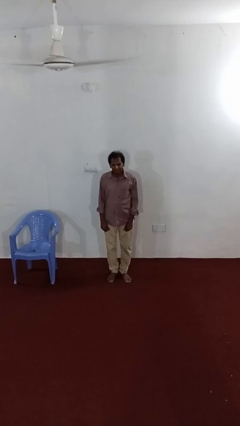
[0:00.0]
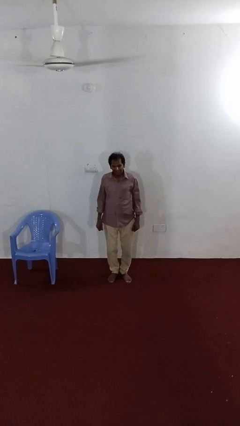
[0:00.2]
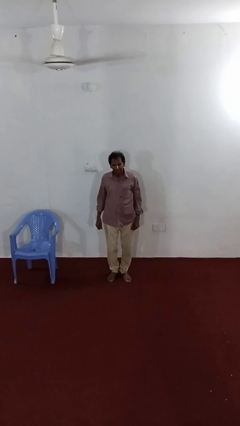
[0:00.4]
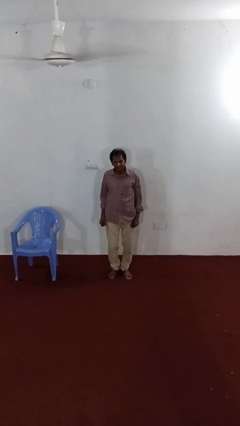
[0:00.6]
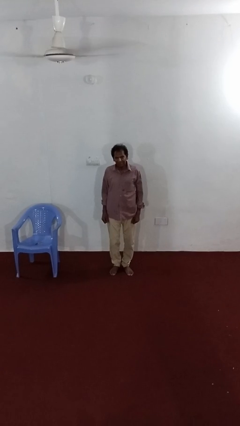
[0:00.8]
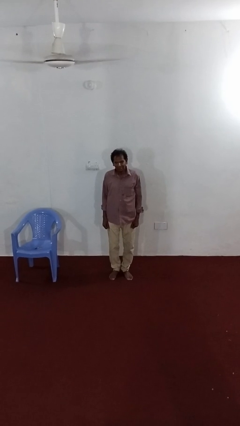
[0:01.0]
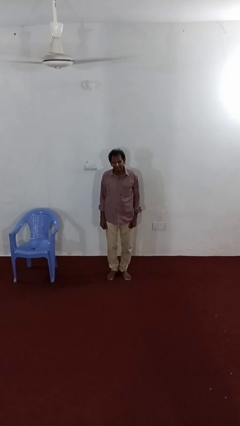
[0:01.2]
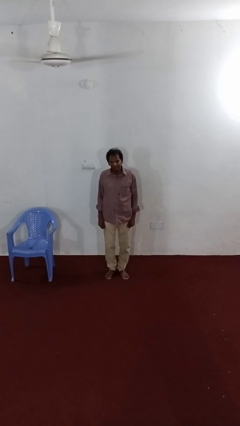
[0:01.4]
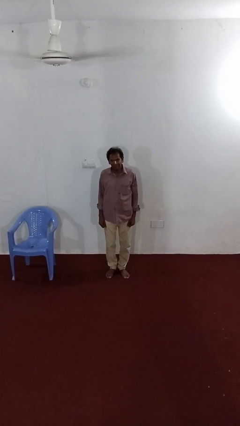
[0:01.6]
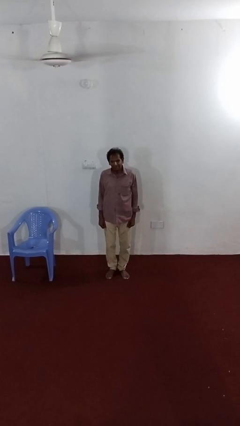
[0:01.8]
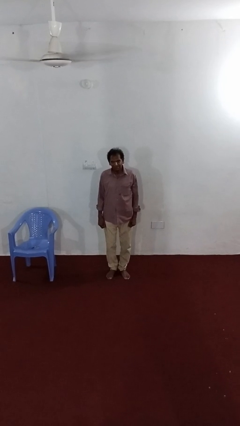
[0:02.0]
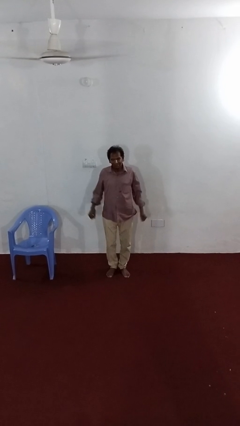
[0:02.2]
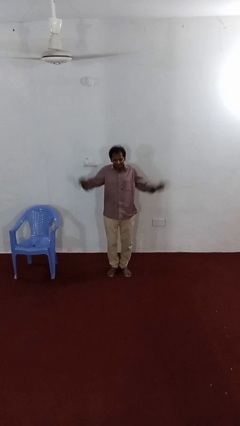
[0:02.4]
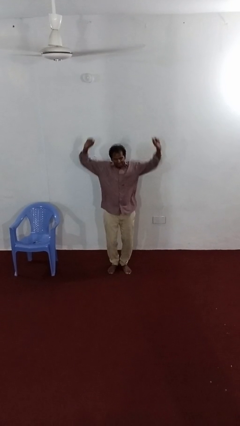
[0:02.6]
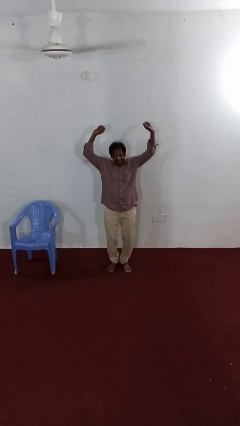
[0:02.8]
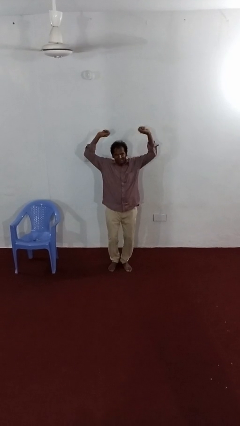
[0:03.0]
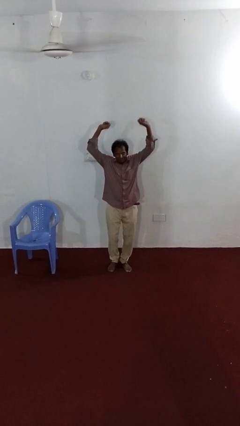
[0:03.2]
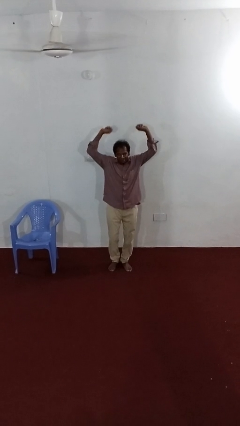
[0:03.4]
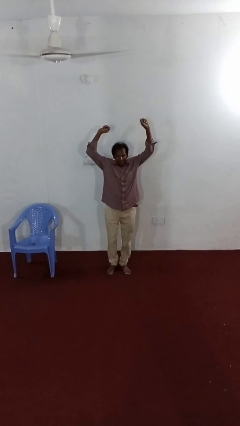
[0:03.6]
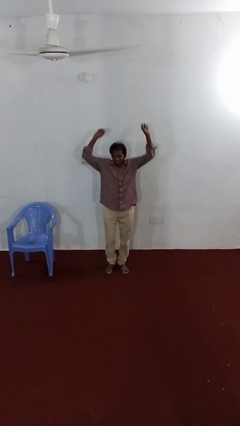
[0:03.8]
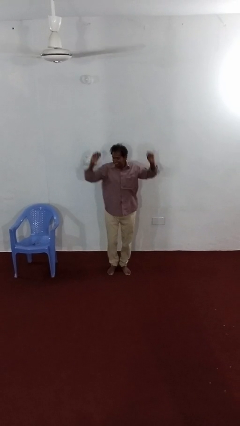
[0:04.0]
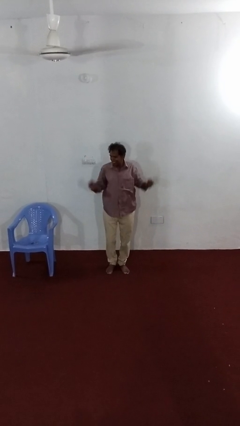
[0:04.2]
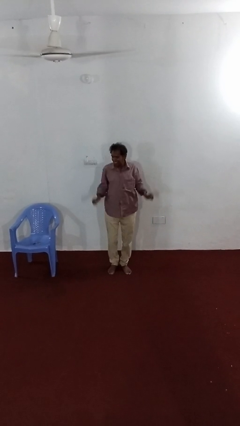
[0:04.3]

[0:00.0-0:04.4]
person dances in place

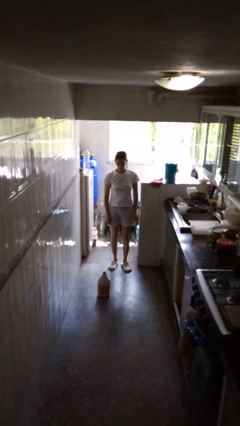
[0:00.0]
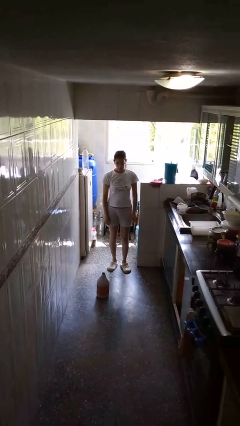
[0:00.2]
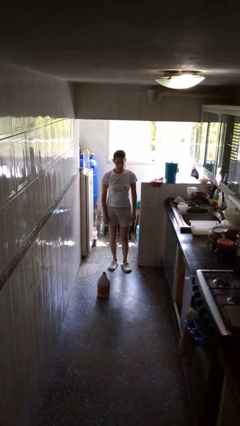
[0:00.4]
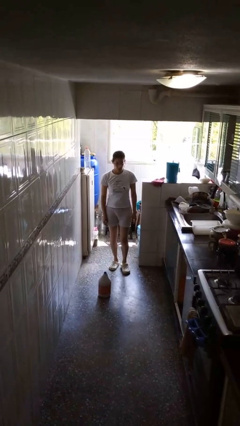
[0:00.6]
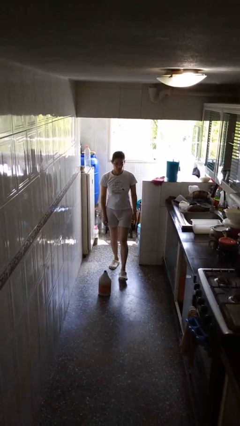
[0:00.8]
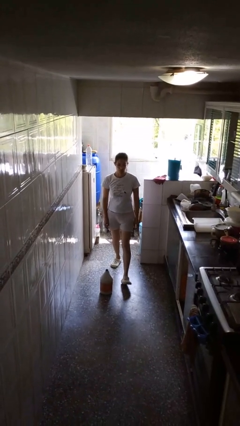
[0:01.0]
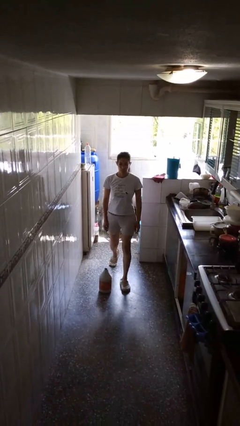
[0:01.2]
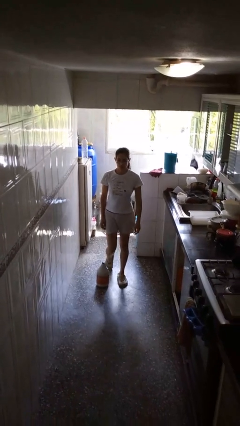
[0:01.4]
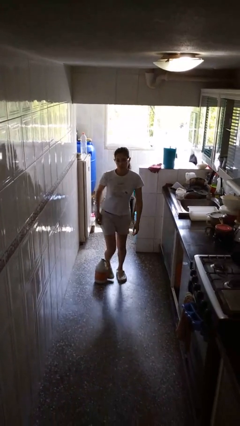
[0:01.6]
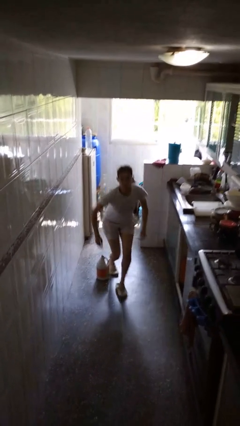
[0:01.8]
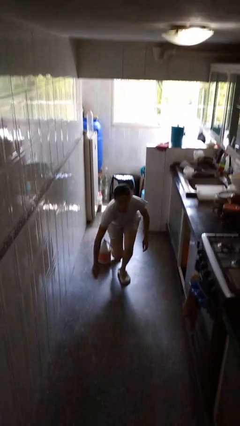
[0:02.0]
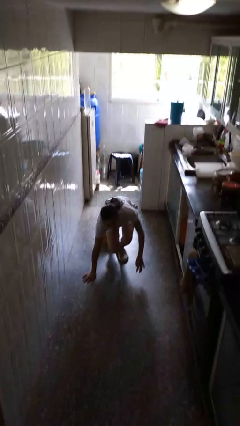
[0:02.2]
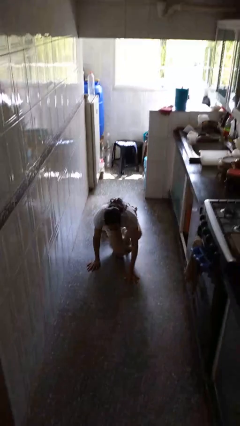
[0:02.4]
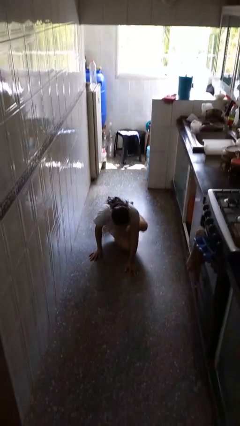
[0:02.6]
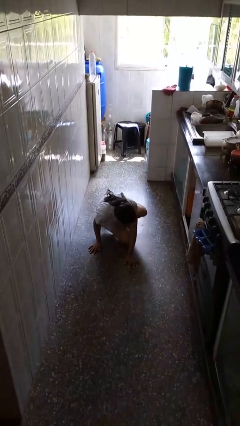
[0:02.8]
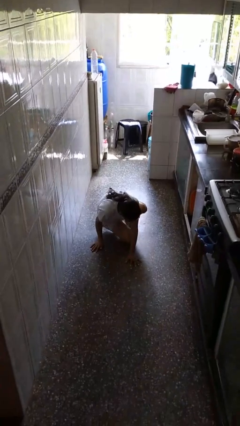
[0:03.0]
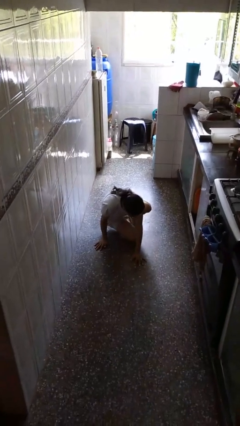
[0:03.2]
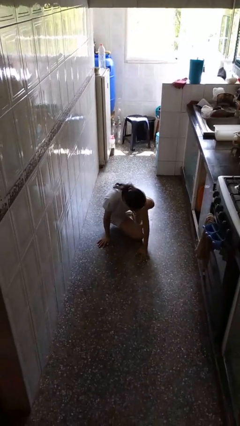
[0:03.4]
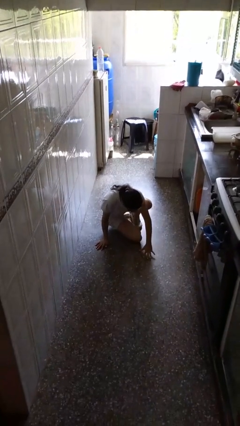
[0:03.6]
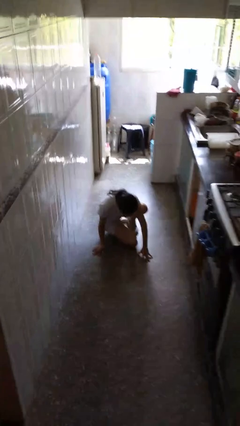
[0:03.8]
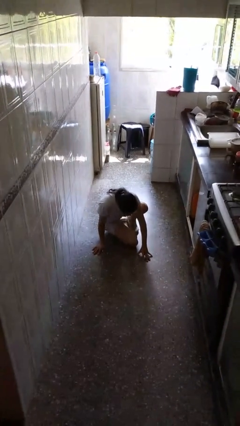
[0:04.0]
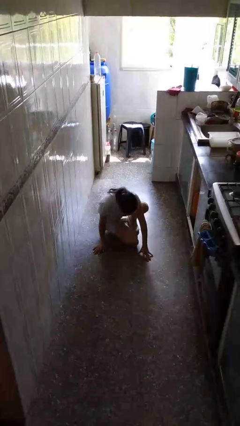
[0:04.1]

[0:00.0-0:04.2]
person trips on object on floor

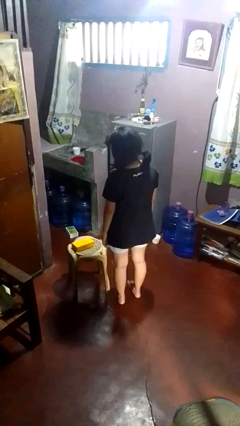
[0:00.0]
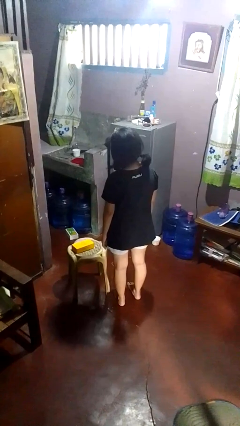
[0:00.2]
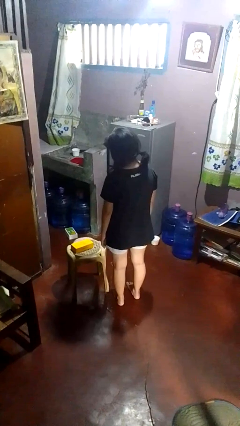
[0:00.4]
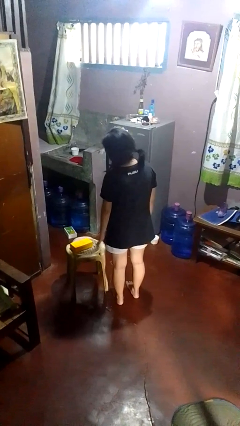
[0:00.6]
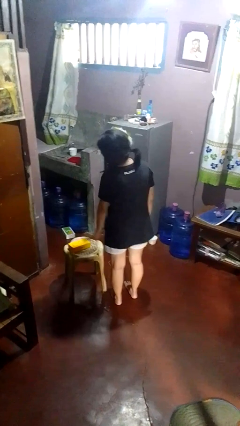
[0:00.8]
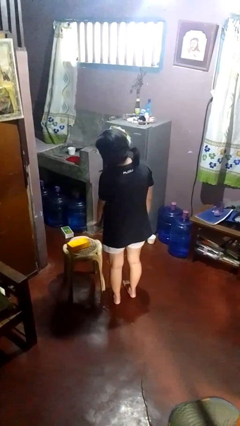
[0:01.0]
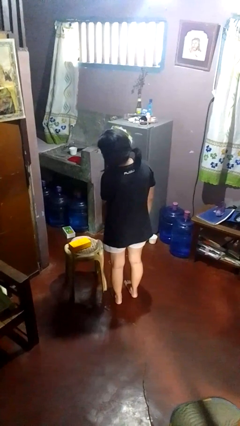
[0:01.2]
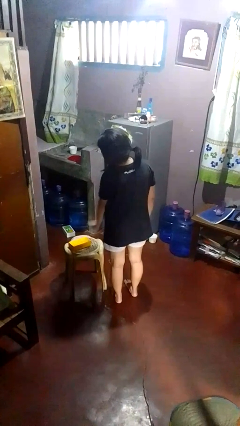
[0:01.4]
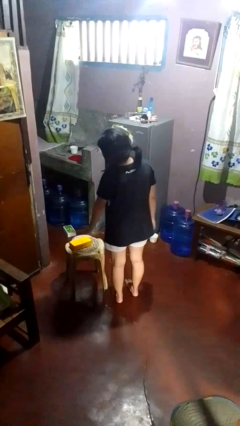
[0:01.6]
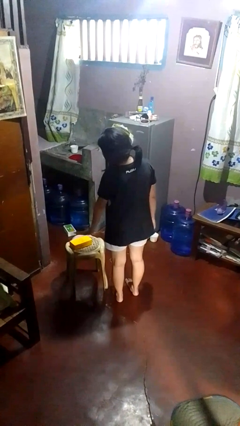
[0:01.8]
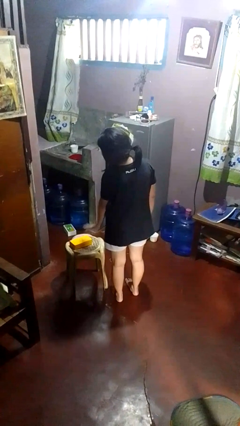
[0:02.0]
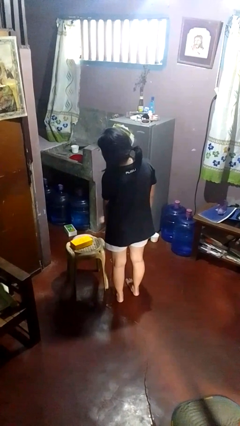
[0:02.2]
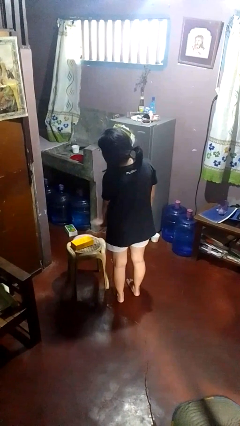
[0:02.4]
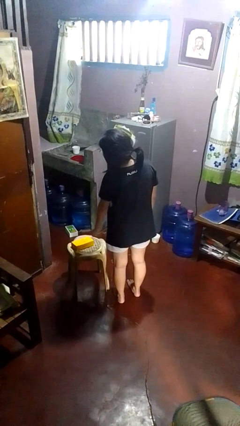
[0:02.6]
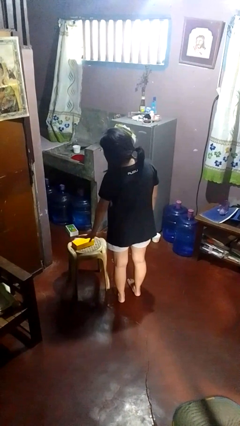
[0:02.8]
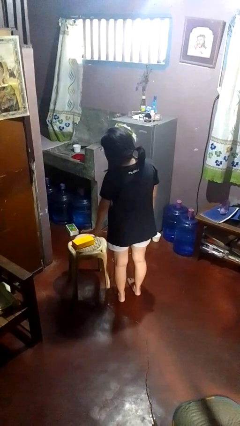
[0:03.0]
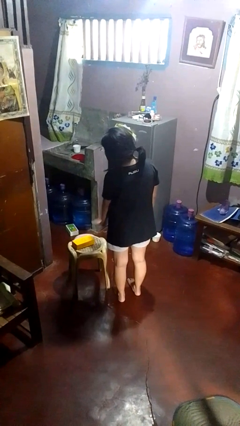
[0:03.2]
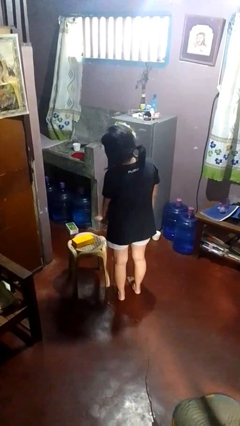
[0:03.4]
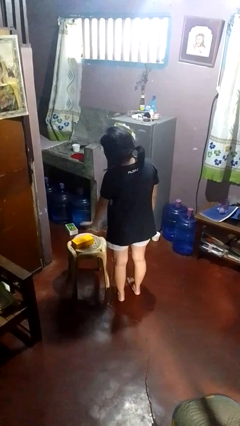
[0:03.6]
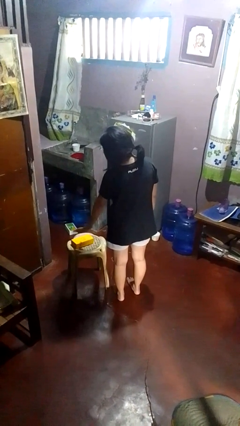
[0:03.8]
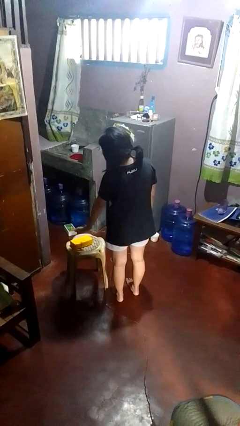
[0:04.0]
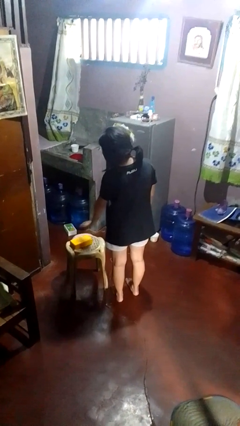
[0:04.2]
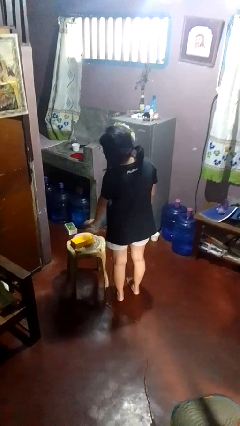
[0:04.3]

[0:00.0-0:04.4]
person waves hand over object

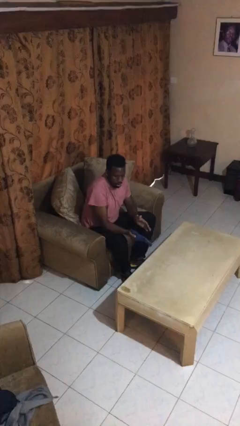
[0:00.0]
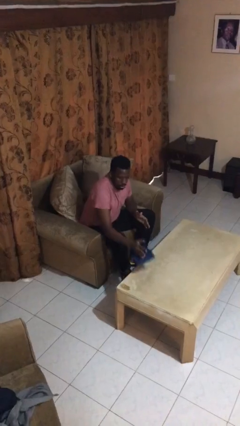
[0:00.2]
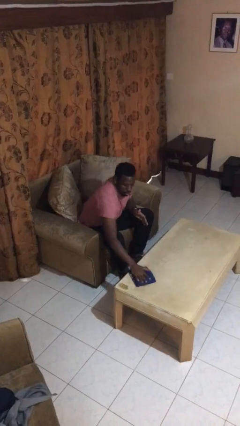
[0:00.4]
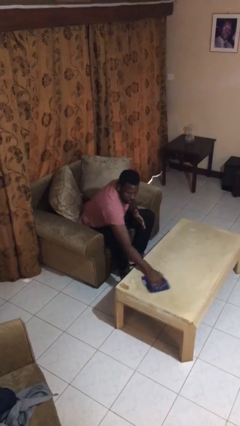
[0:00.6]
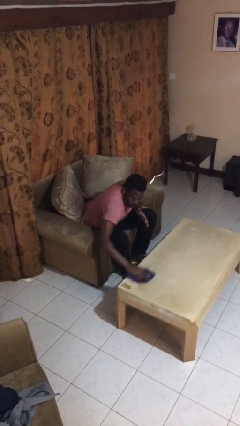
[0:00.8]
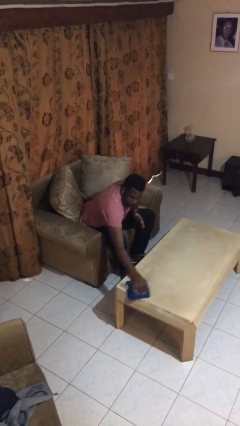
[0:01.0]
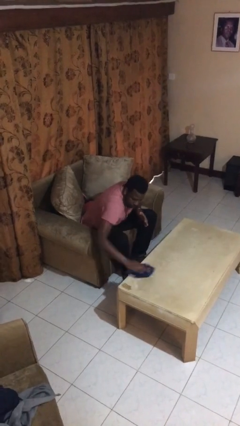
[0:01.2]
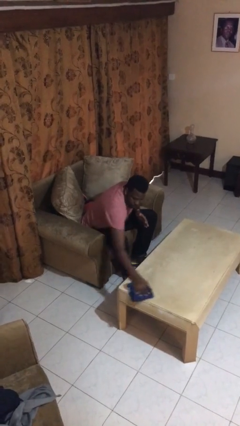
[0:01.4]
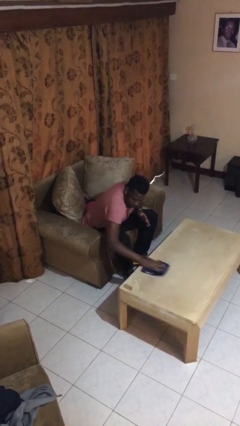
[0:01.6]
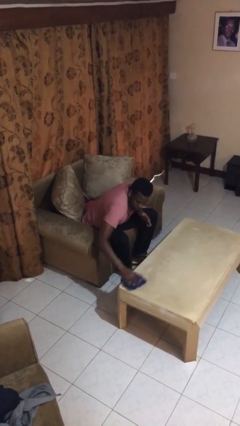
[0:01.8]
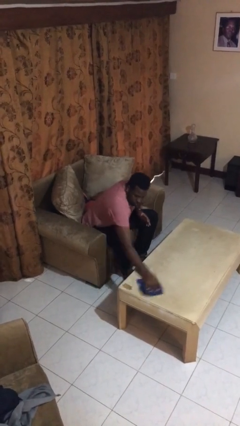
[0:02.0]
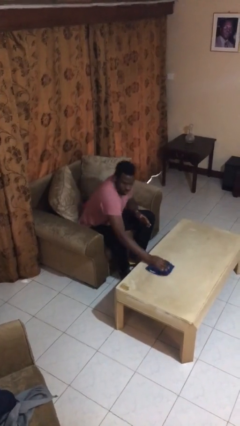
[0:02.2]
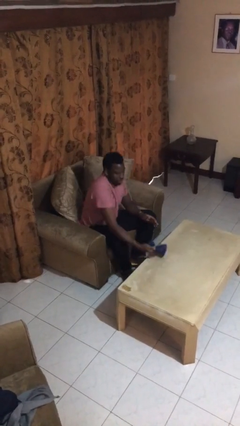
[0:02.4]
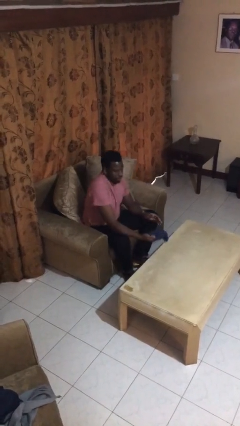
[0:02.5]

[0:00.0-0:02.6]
person cleans table with rag

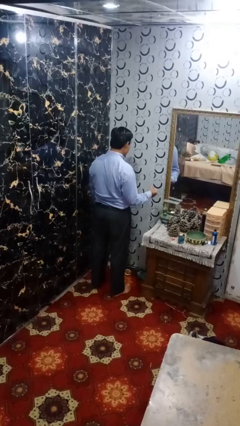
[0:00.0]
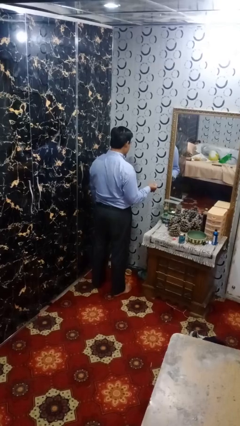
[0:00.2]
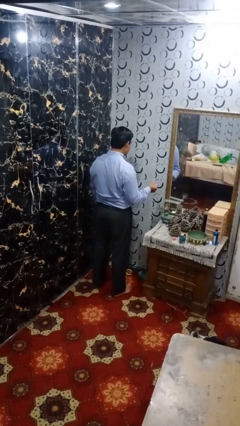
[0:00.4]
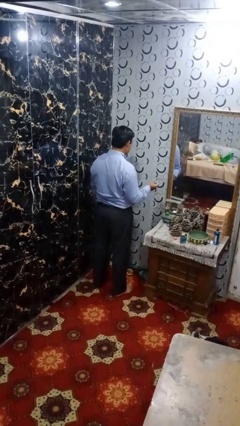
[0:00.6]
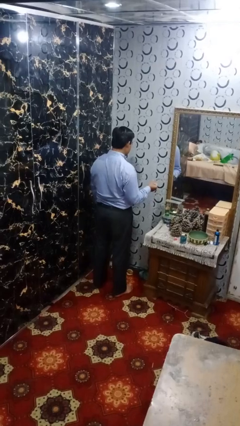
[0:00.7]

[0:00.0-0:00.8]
person snaps fingers

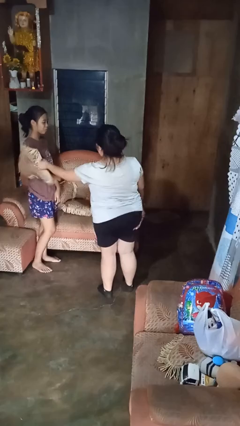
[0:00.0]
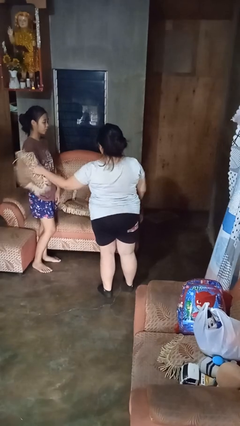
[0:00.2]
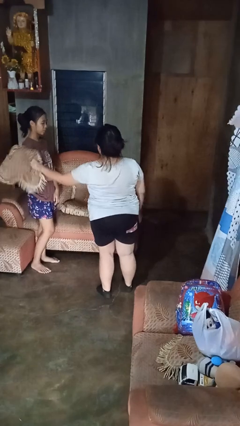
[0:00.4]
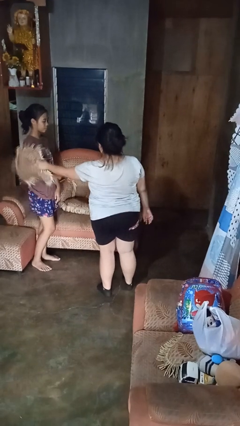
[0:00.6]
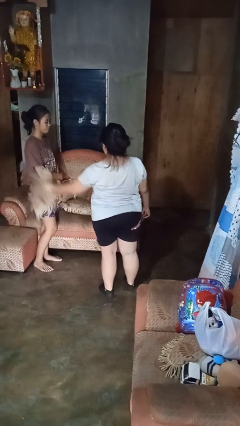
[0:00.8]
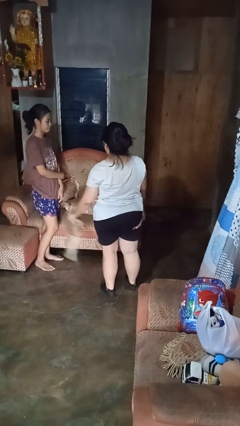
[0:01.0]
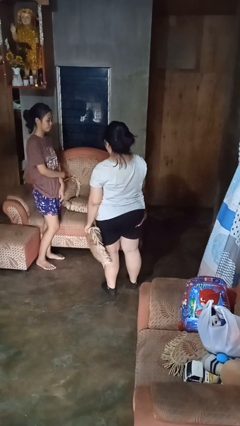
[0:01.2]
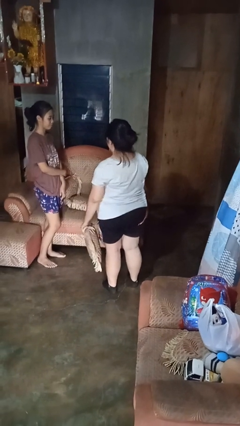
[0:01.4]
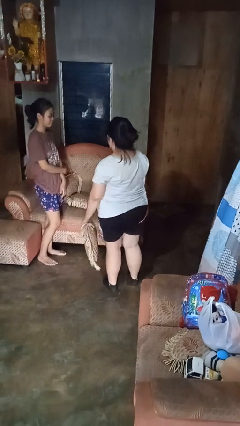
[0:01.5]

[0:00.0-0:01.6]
person hits person with pillow
